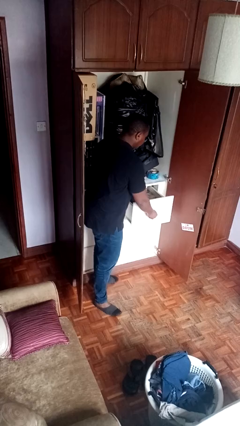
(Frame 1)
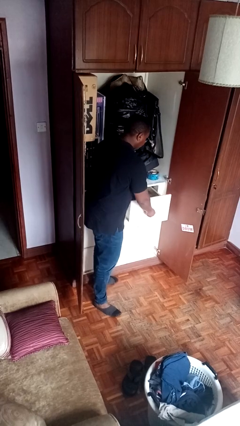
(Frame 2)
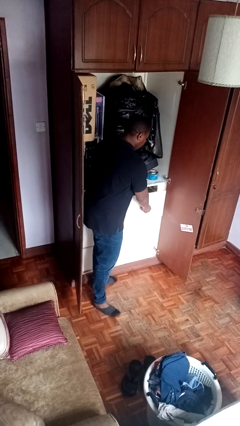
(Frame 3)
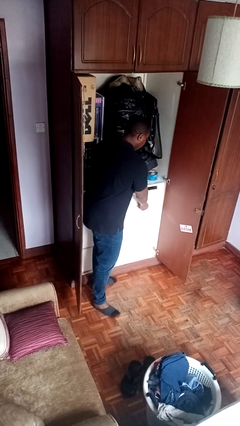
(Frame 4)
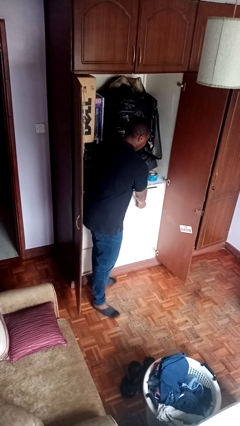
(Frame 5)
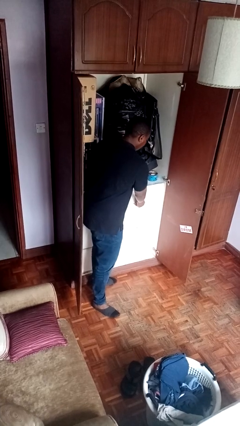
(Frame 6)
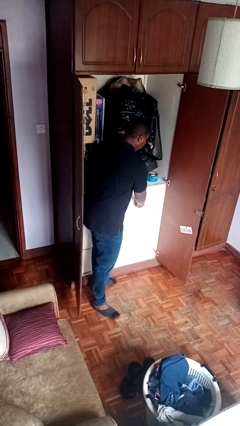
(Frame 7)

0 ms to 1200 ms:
person closes dresser drawer

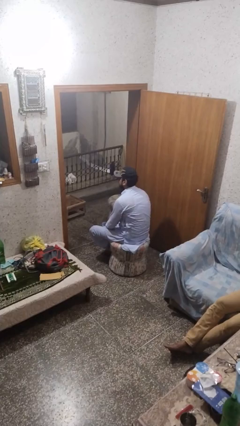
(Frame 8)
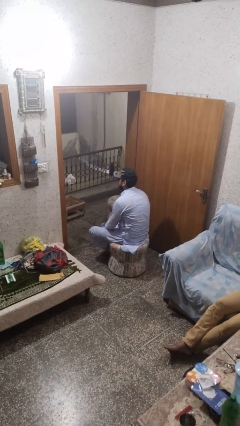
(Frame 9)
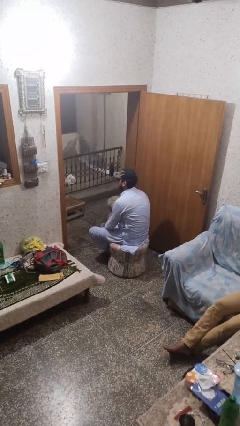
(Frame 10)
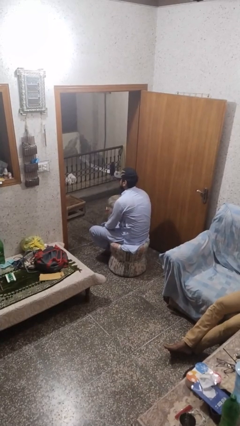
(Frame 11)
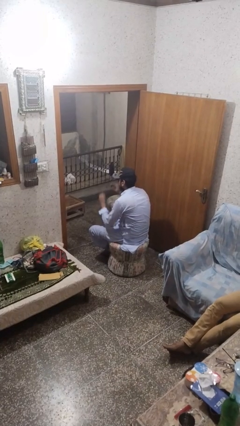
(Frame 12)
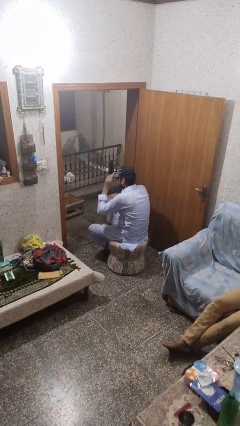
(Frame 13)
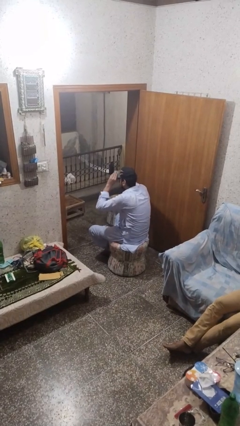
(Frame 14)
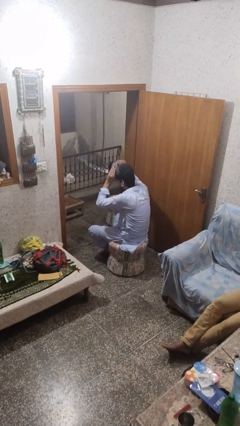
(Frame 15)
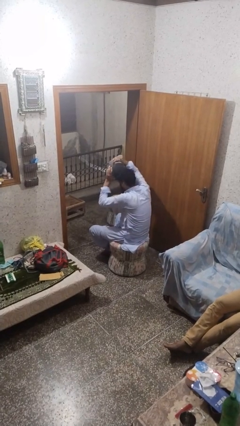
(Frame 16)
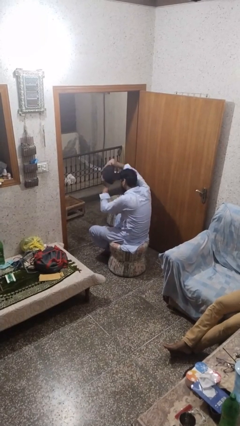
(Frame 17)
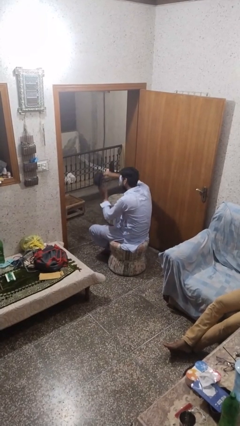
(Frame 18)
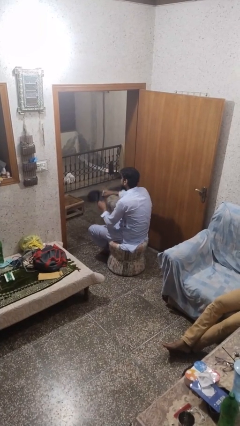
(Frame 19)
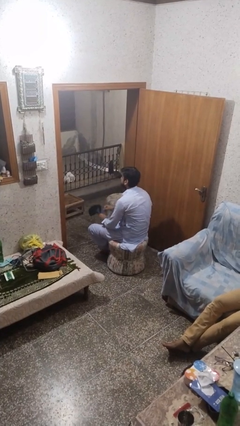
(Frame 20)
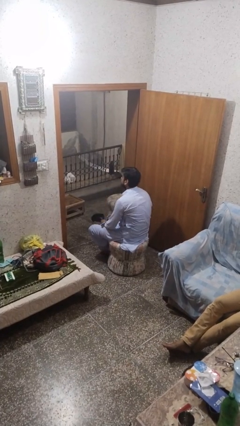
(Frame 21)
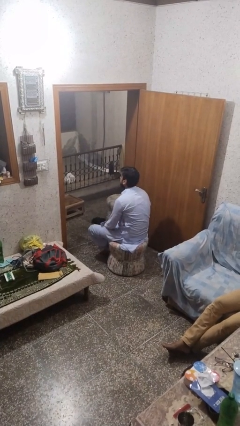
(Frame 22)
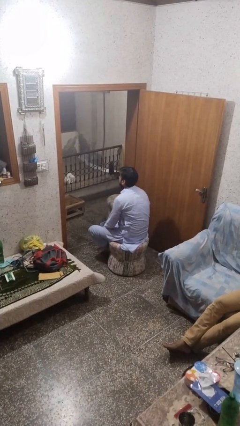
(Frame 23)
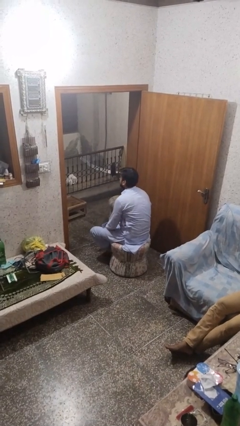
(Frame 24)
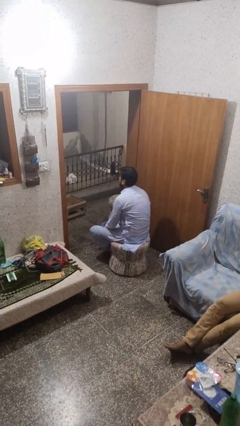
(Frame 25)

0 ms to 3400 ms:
person takes off hat

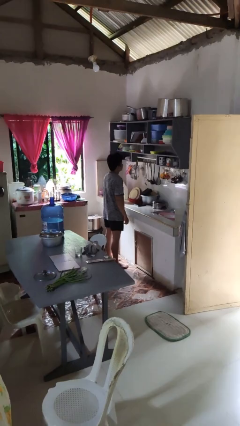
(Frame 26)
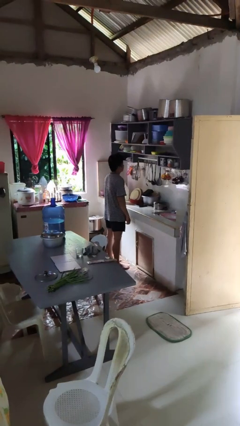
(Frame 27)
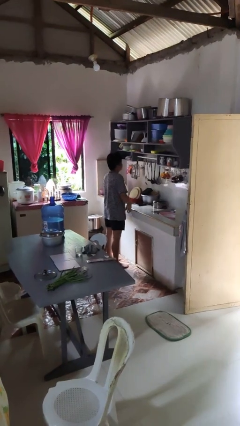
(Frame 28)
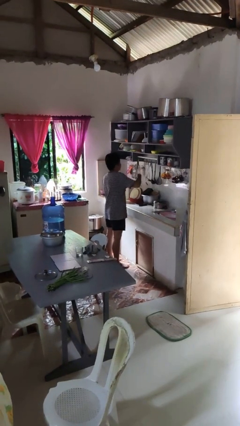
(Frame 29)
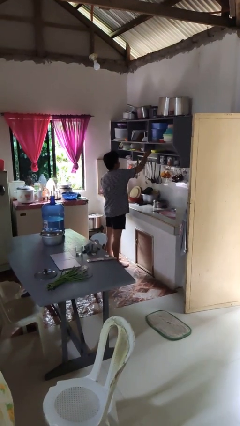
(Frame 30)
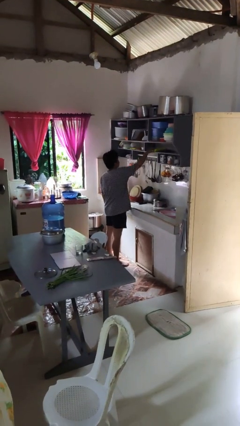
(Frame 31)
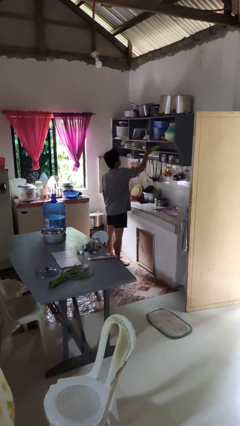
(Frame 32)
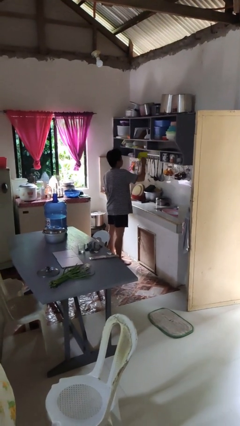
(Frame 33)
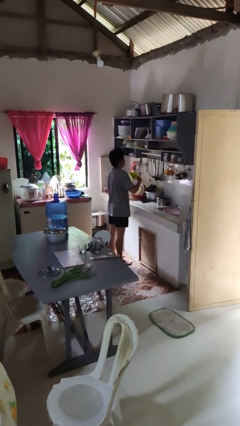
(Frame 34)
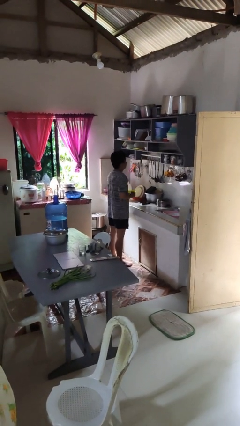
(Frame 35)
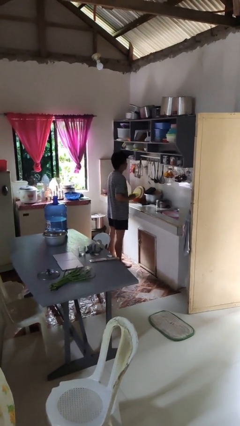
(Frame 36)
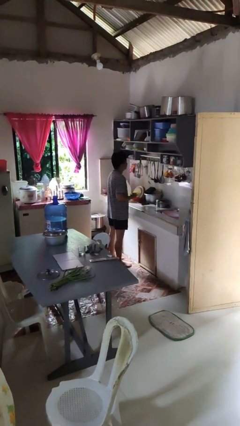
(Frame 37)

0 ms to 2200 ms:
person takes object from cabinet

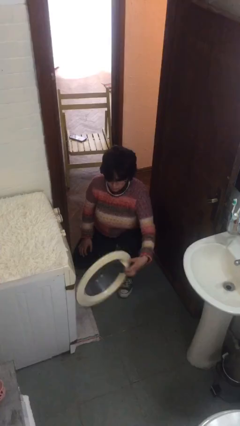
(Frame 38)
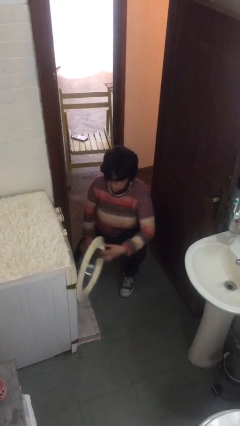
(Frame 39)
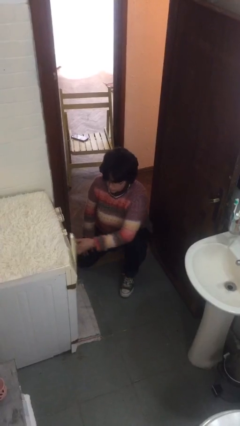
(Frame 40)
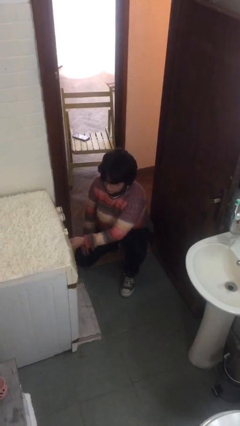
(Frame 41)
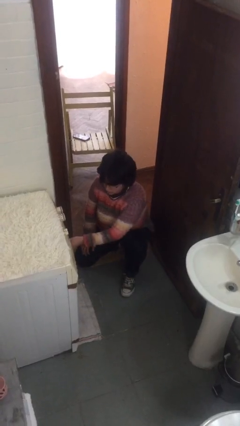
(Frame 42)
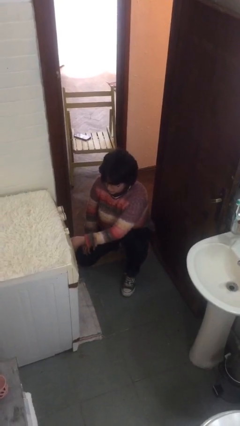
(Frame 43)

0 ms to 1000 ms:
person closes suitcase

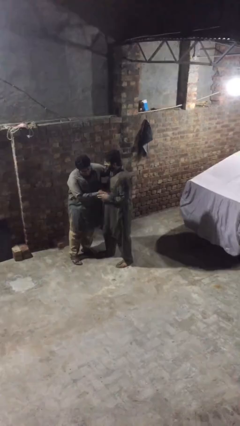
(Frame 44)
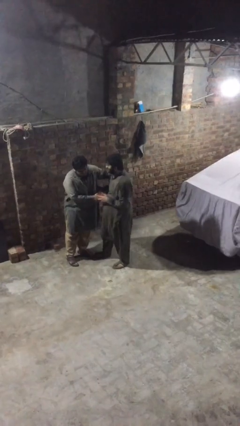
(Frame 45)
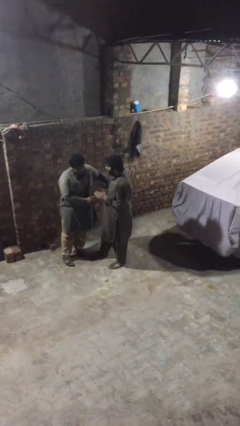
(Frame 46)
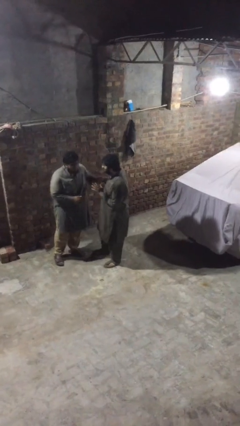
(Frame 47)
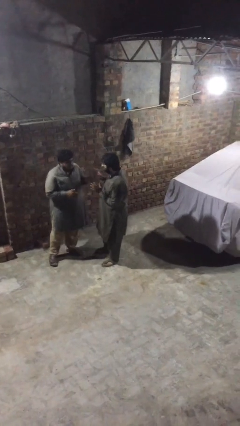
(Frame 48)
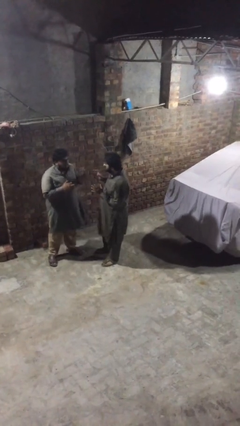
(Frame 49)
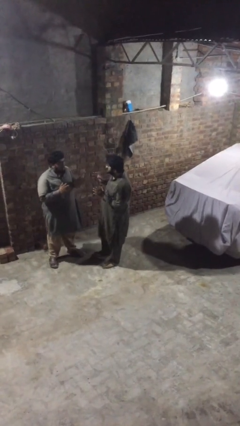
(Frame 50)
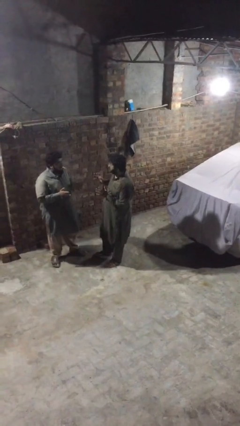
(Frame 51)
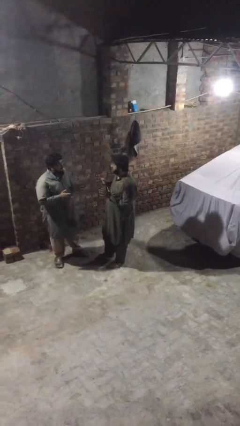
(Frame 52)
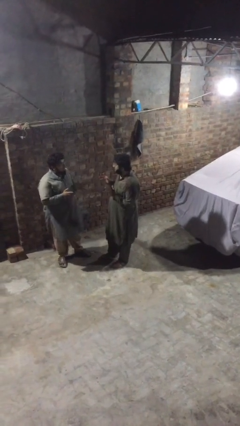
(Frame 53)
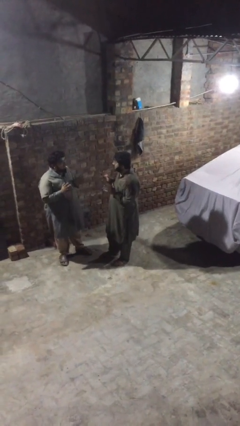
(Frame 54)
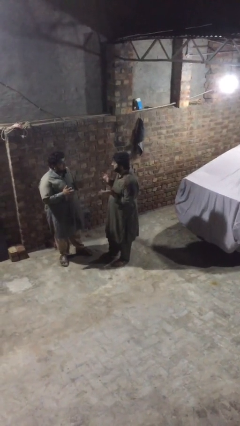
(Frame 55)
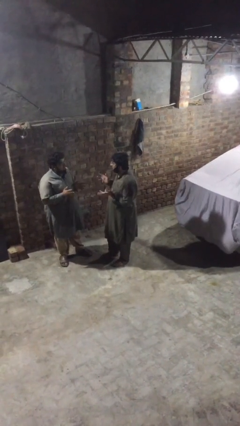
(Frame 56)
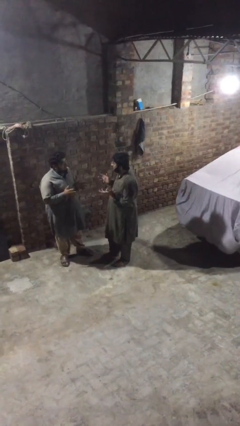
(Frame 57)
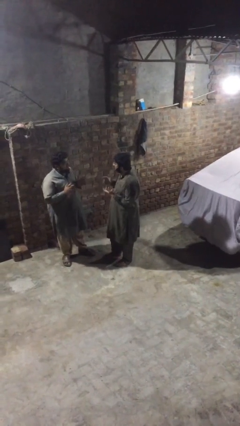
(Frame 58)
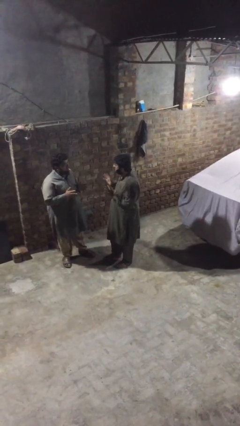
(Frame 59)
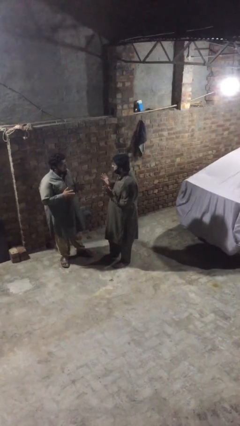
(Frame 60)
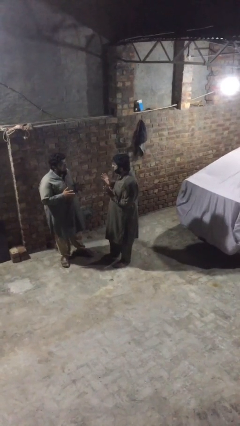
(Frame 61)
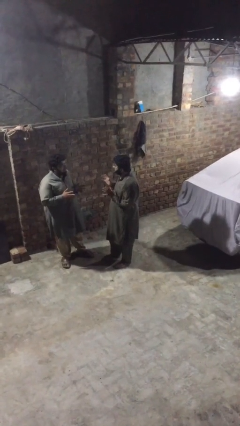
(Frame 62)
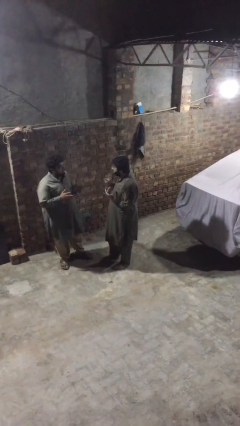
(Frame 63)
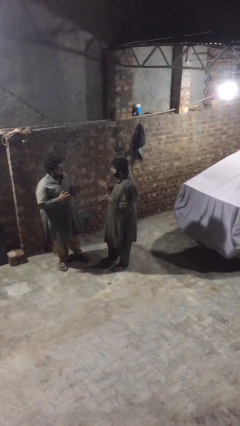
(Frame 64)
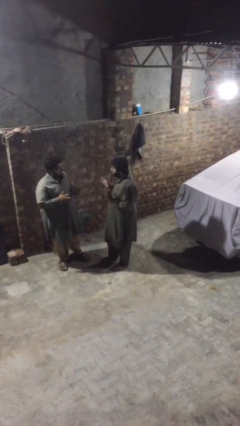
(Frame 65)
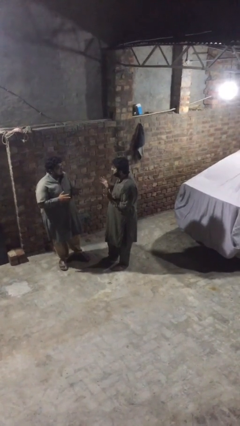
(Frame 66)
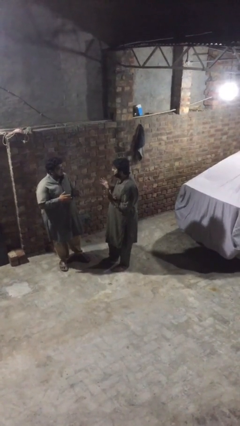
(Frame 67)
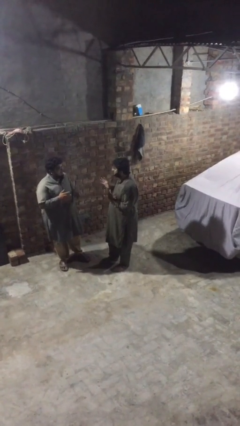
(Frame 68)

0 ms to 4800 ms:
person talks to person

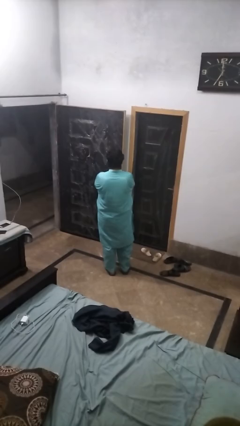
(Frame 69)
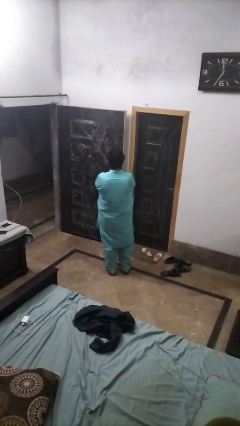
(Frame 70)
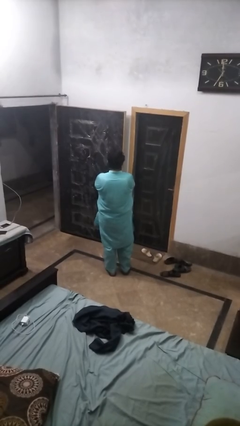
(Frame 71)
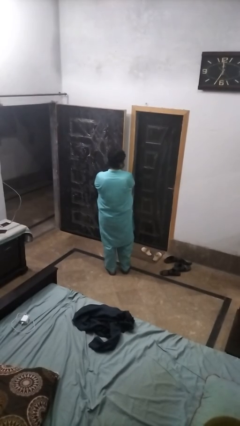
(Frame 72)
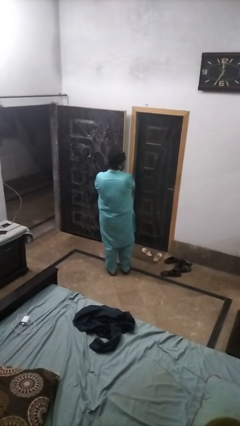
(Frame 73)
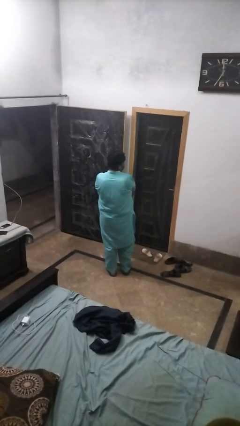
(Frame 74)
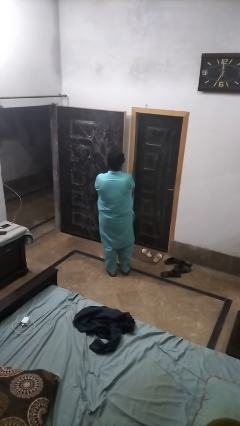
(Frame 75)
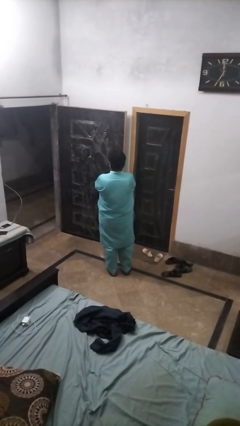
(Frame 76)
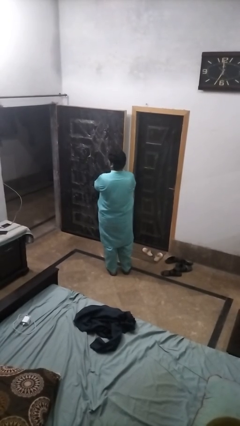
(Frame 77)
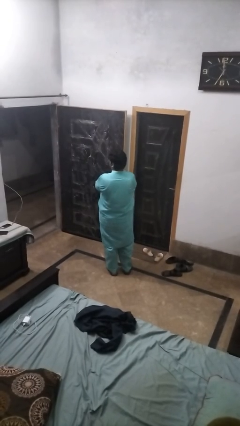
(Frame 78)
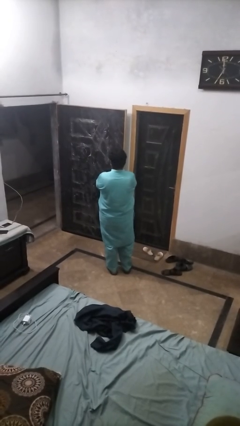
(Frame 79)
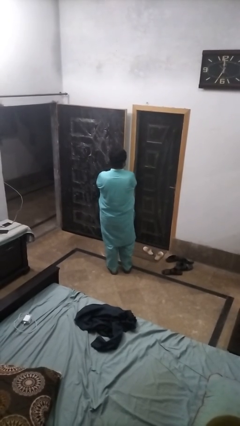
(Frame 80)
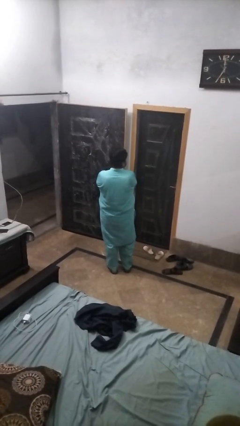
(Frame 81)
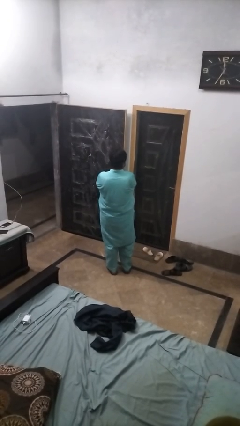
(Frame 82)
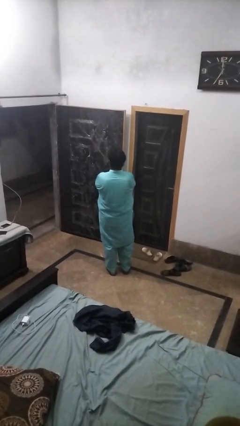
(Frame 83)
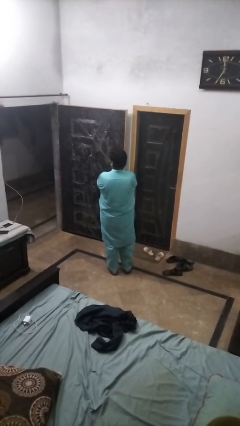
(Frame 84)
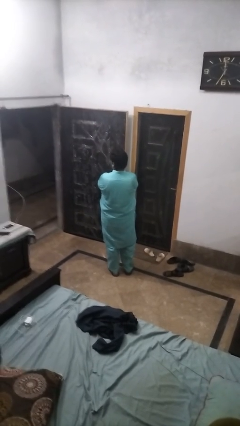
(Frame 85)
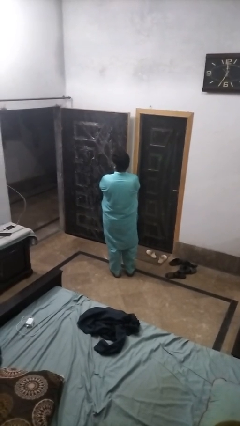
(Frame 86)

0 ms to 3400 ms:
person shakes head

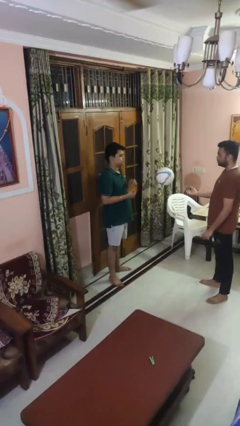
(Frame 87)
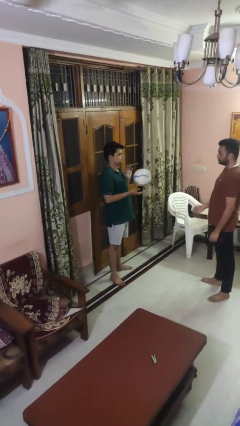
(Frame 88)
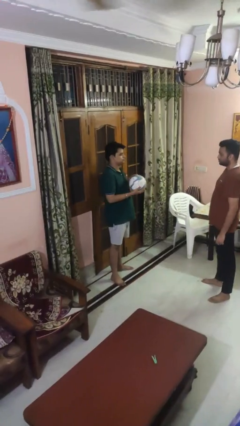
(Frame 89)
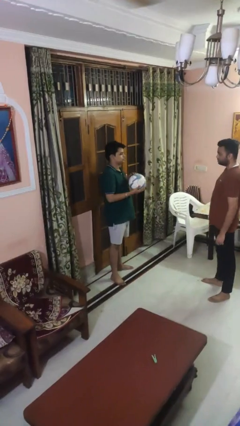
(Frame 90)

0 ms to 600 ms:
person catches object from person
